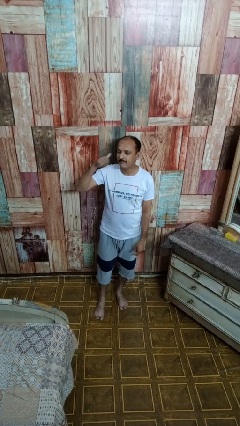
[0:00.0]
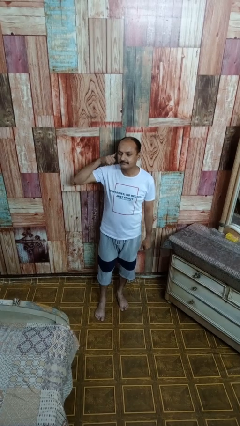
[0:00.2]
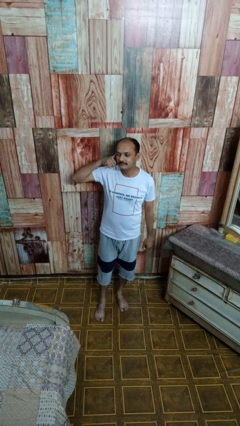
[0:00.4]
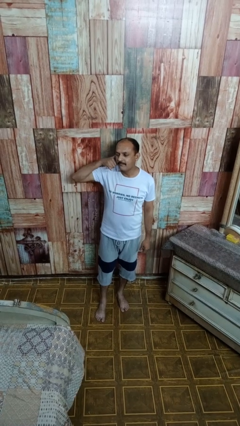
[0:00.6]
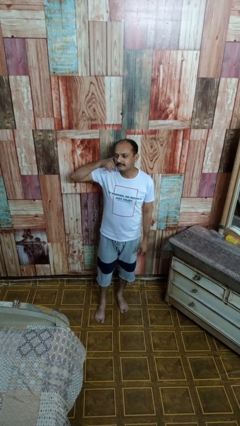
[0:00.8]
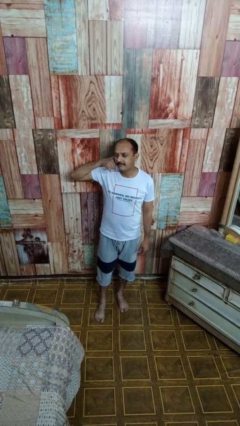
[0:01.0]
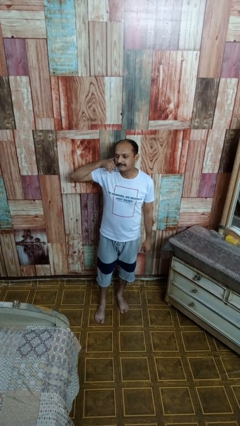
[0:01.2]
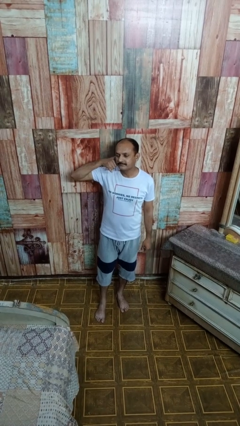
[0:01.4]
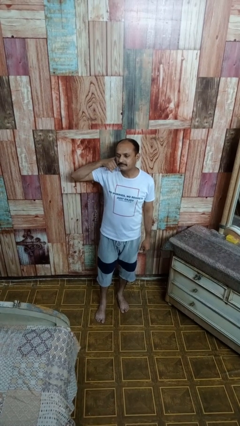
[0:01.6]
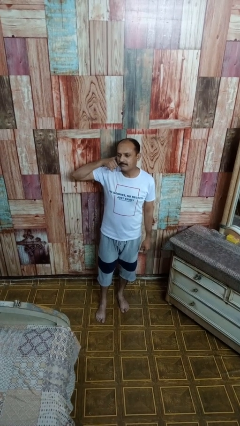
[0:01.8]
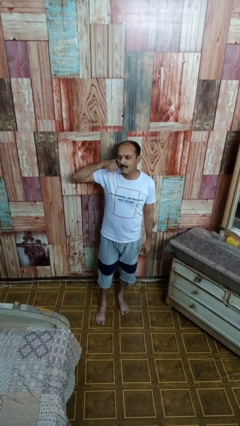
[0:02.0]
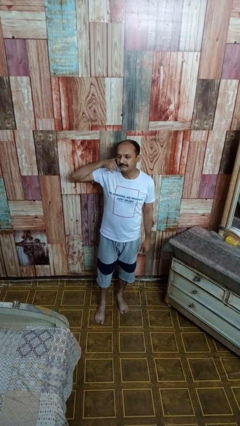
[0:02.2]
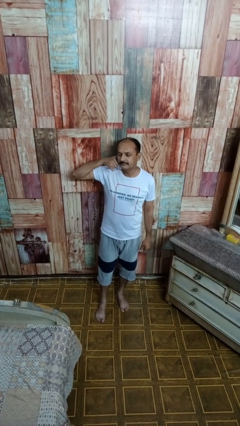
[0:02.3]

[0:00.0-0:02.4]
person gestures call me

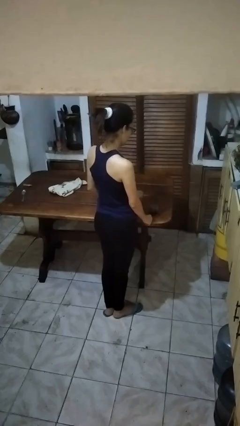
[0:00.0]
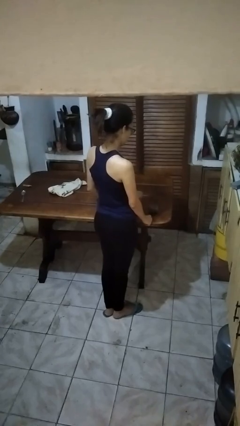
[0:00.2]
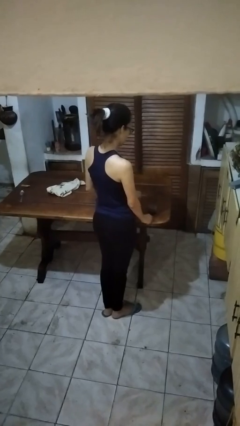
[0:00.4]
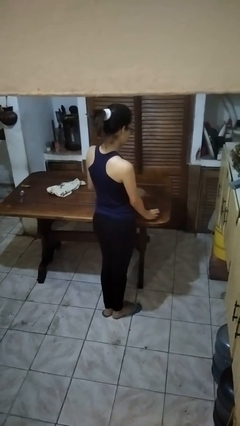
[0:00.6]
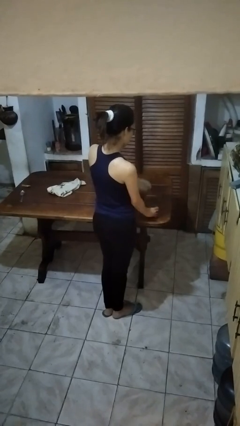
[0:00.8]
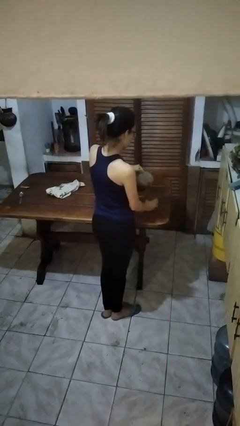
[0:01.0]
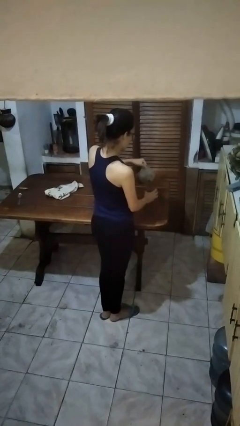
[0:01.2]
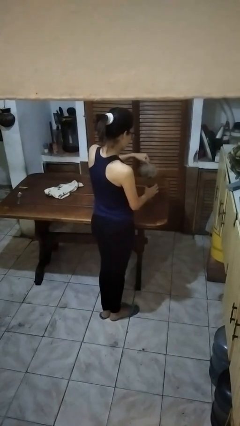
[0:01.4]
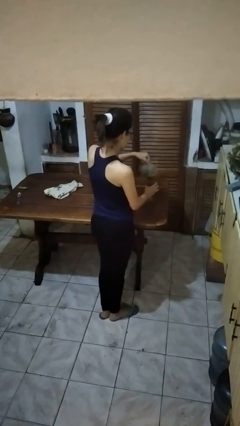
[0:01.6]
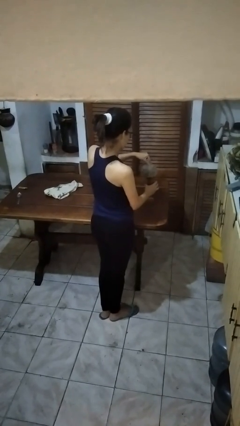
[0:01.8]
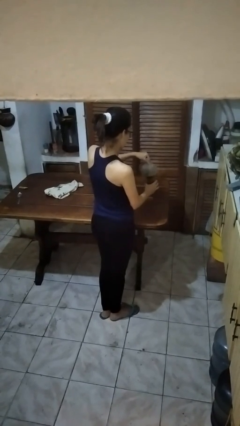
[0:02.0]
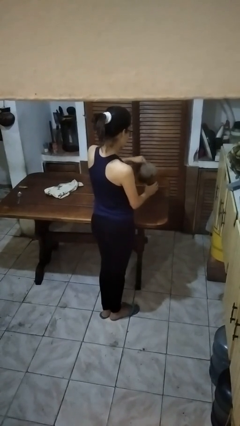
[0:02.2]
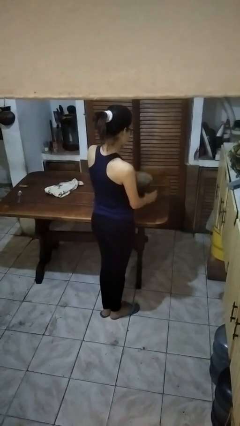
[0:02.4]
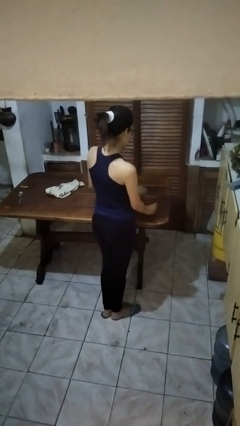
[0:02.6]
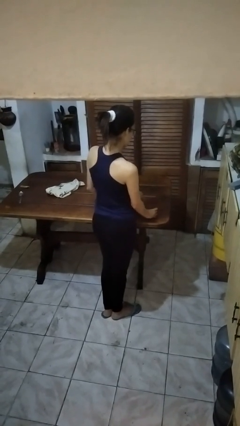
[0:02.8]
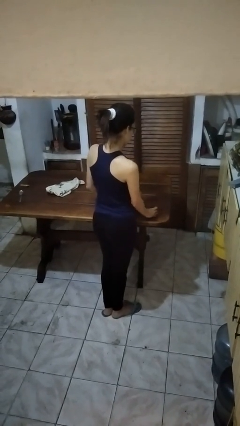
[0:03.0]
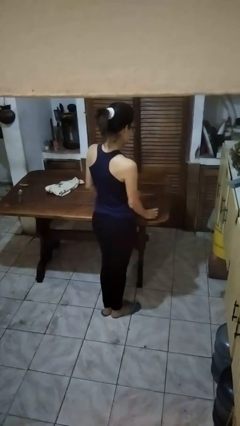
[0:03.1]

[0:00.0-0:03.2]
person pours coffee into mug

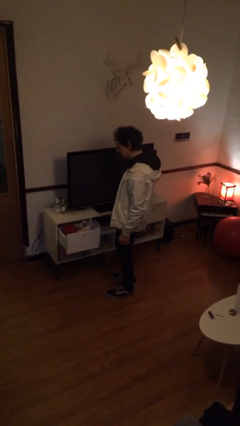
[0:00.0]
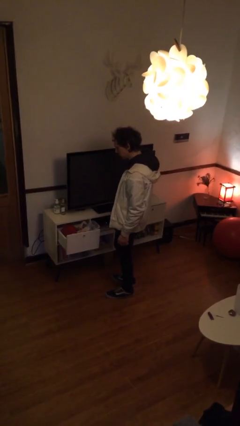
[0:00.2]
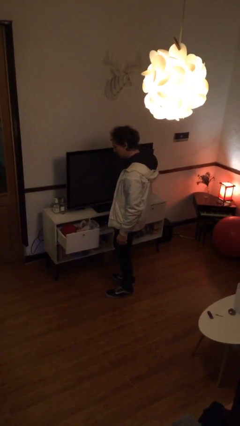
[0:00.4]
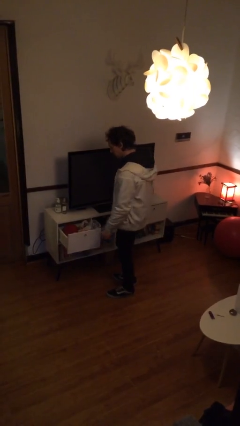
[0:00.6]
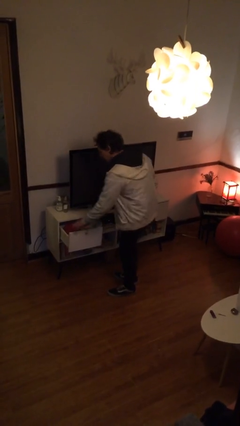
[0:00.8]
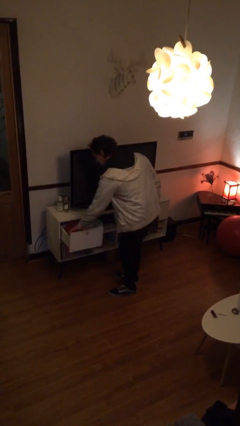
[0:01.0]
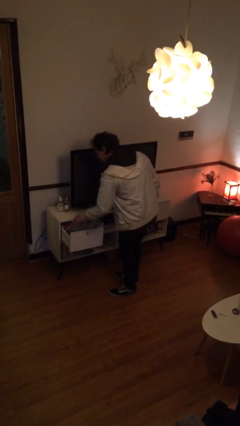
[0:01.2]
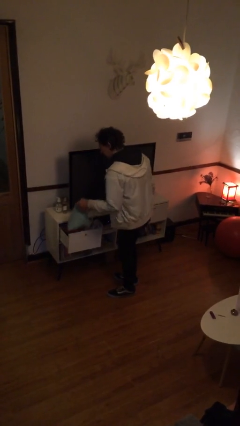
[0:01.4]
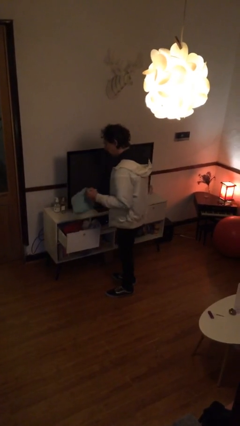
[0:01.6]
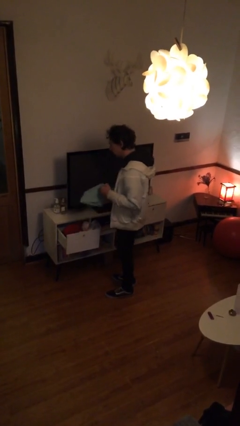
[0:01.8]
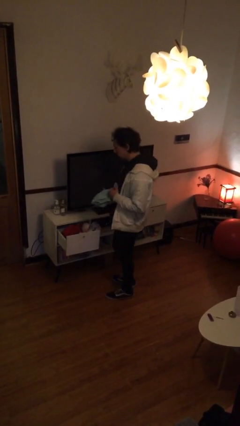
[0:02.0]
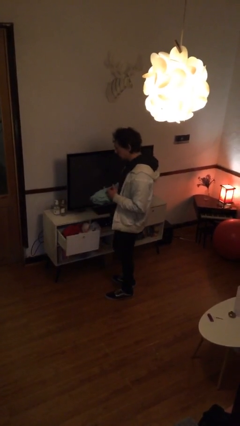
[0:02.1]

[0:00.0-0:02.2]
person takes clothes from dresser

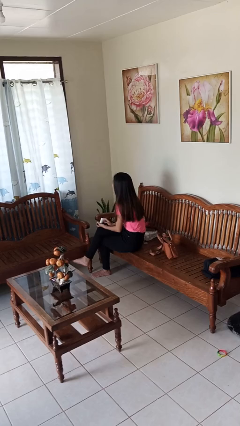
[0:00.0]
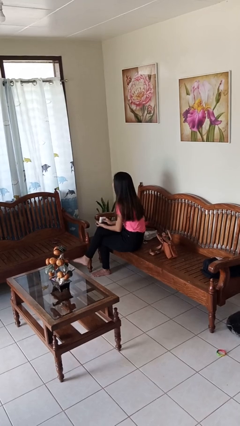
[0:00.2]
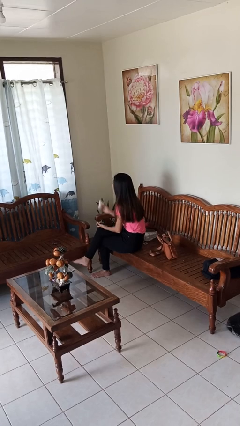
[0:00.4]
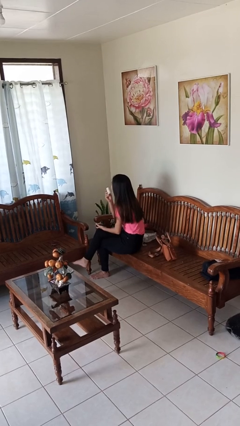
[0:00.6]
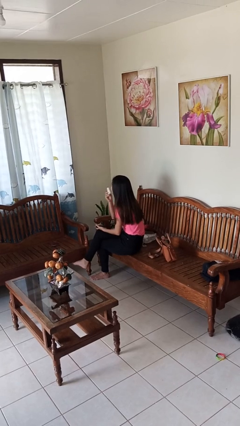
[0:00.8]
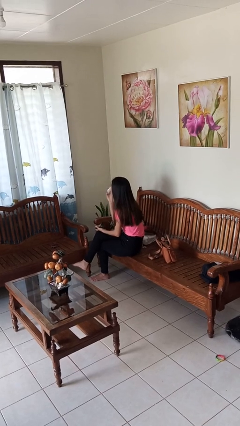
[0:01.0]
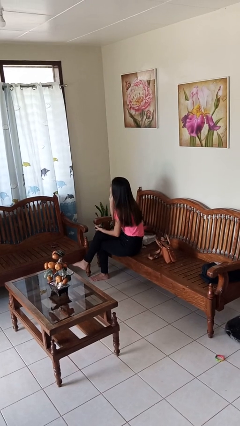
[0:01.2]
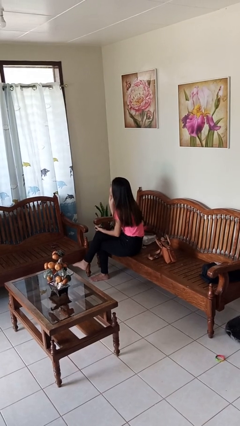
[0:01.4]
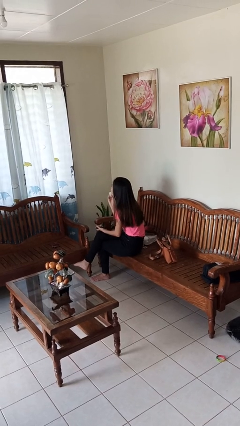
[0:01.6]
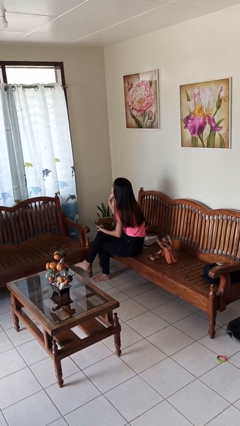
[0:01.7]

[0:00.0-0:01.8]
person applies foundation makeup

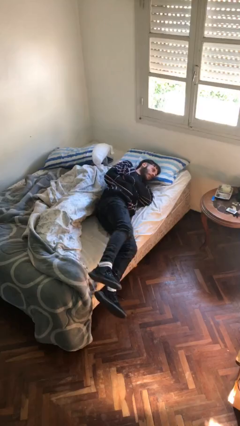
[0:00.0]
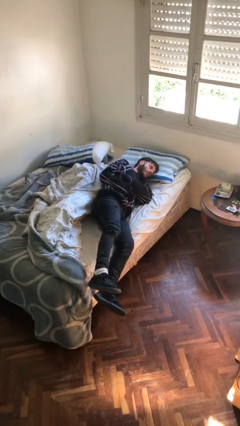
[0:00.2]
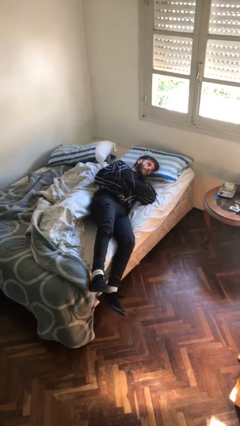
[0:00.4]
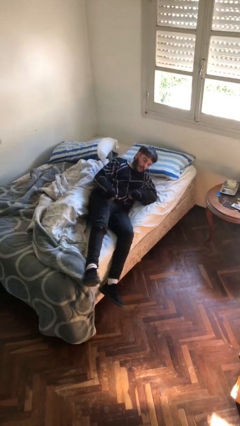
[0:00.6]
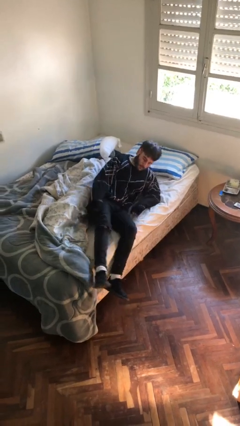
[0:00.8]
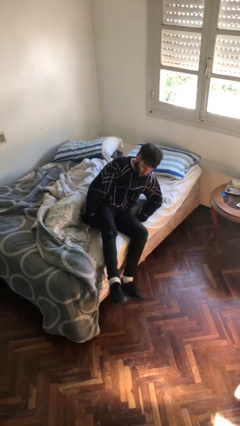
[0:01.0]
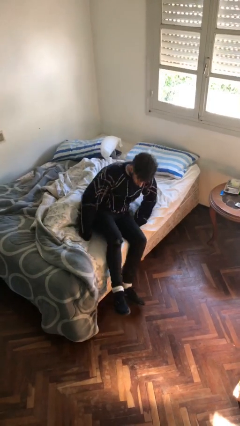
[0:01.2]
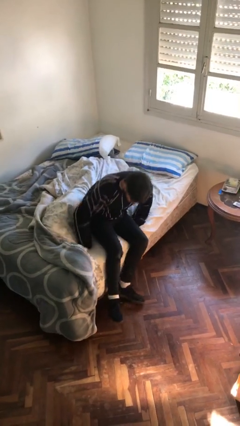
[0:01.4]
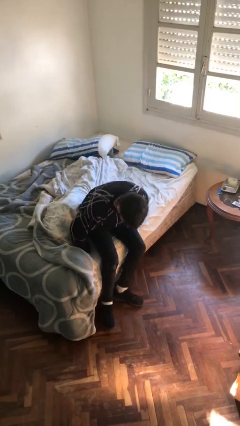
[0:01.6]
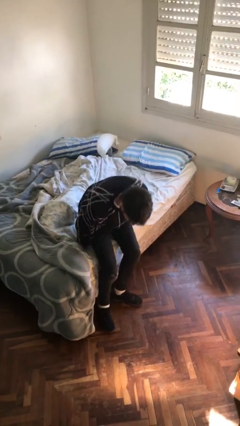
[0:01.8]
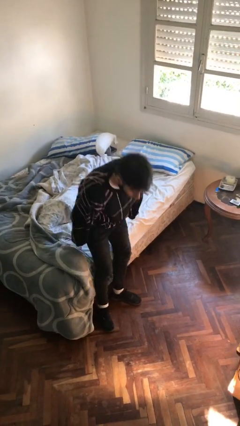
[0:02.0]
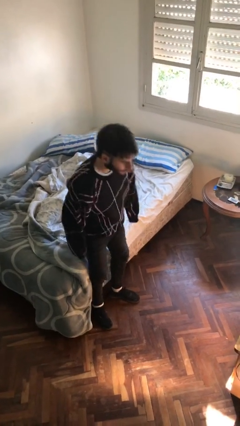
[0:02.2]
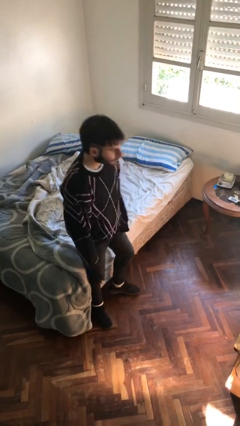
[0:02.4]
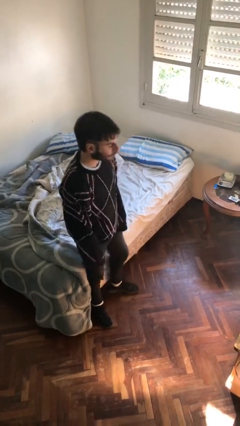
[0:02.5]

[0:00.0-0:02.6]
person stands up

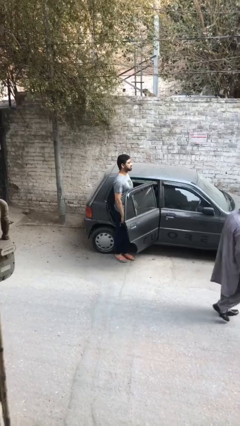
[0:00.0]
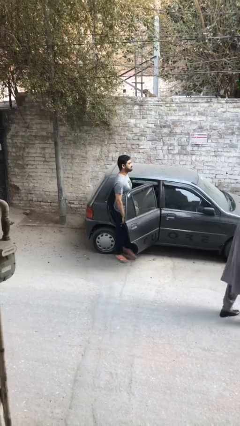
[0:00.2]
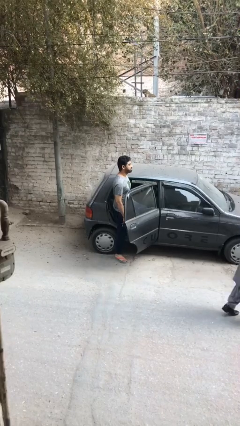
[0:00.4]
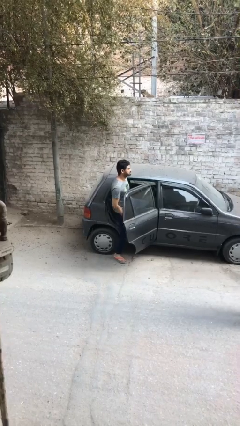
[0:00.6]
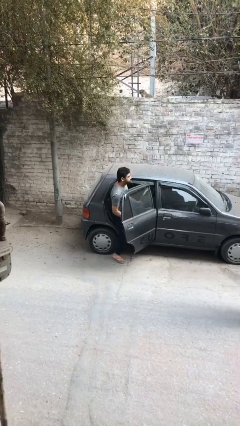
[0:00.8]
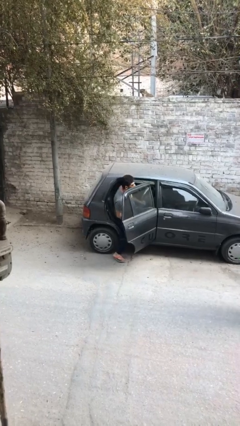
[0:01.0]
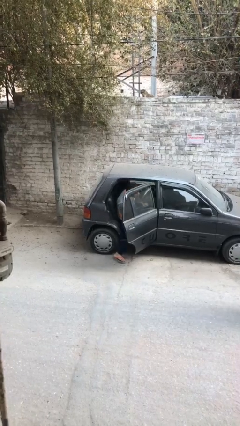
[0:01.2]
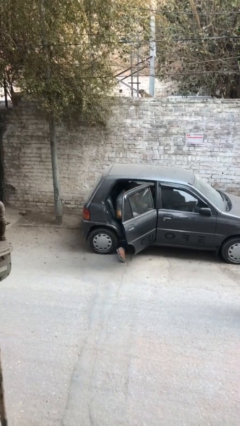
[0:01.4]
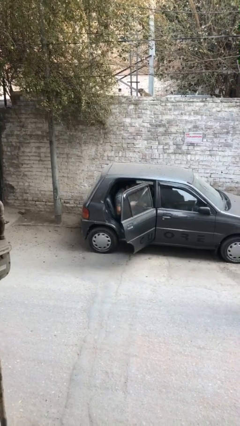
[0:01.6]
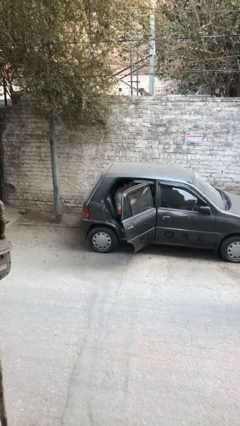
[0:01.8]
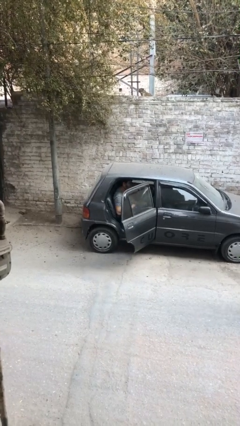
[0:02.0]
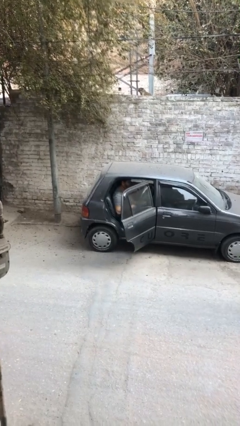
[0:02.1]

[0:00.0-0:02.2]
person enters car

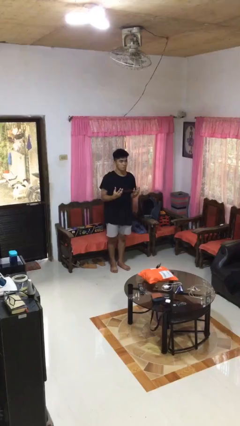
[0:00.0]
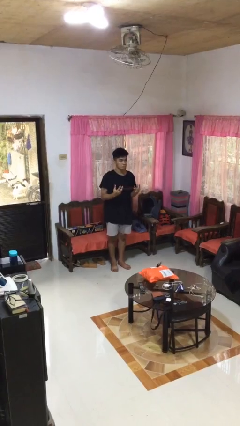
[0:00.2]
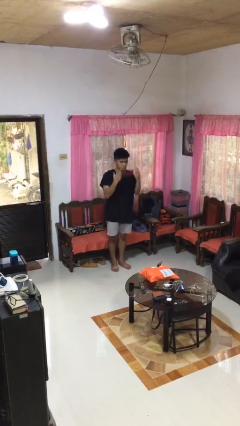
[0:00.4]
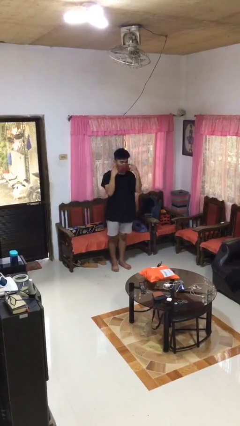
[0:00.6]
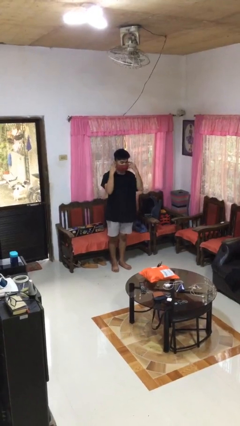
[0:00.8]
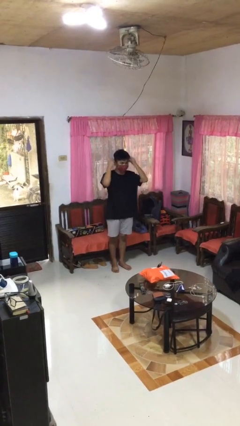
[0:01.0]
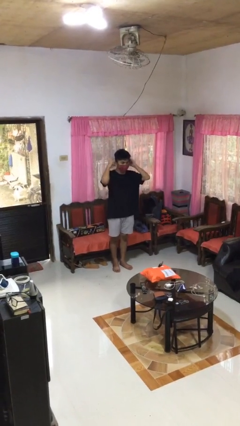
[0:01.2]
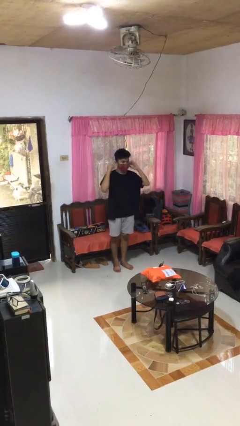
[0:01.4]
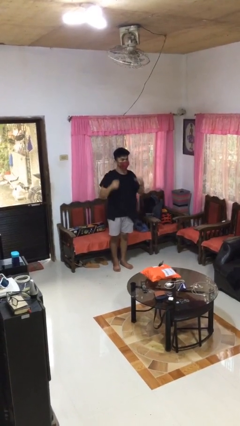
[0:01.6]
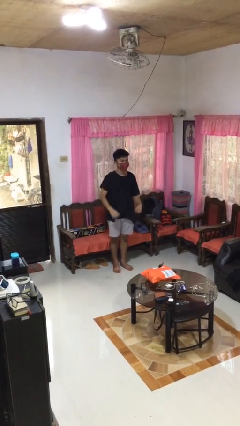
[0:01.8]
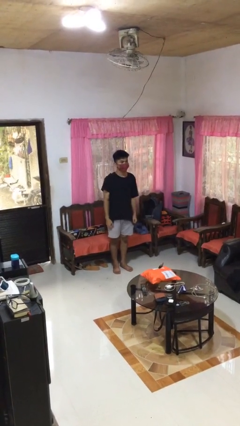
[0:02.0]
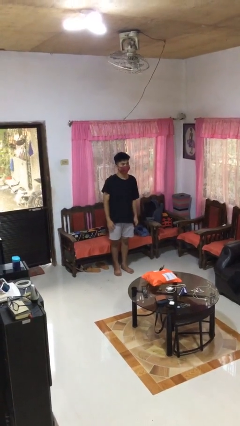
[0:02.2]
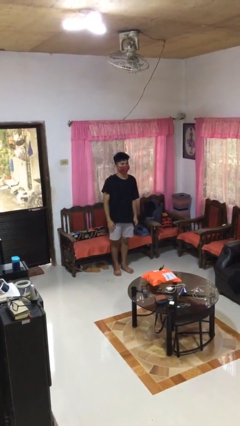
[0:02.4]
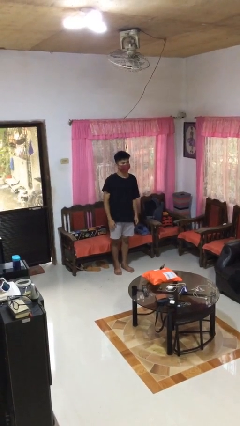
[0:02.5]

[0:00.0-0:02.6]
person puts on facemask
